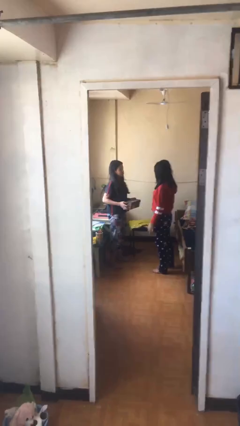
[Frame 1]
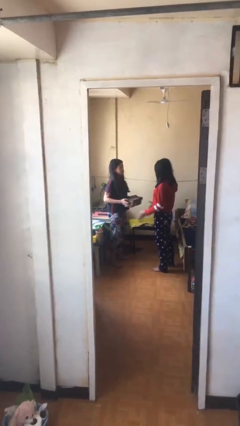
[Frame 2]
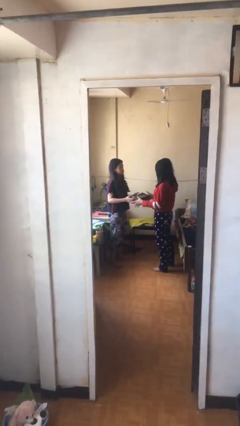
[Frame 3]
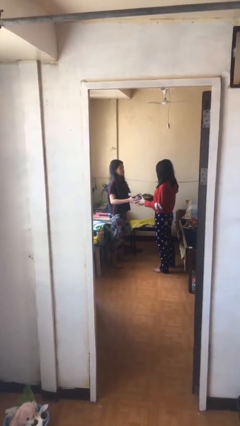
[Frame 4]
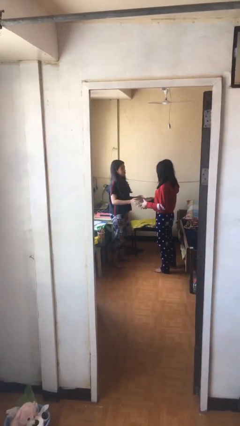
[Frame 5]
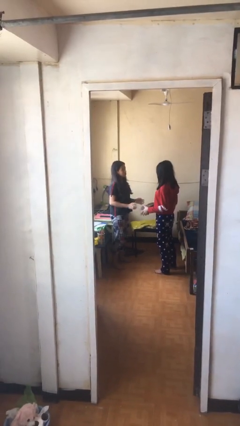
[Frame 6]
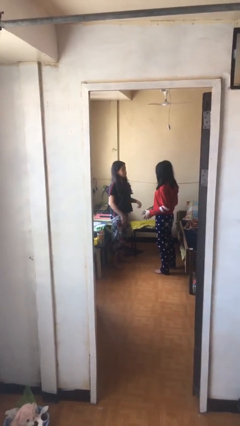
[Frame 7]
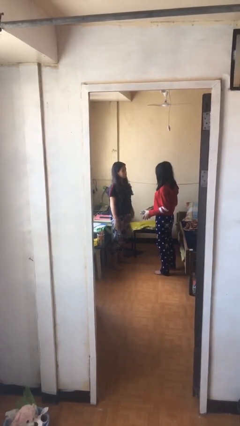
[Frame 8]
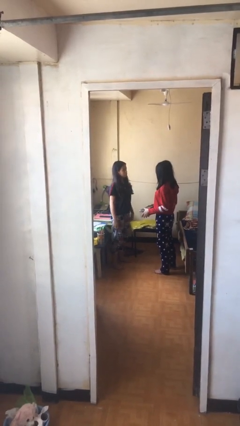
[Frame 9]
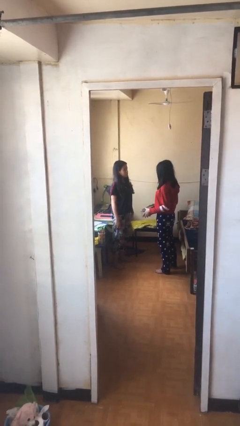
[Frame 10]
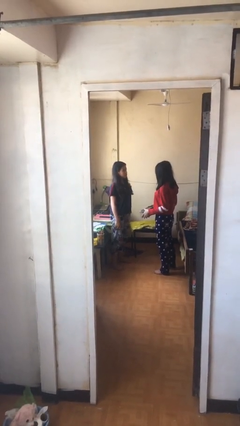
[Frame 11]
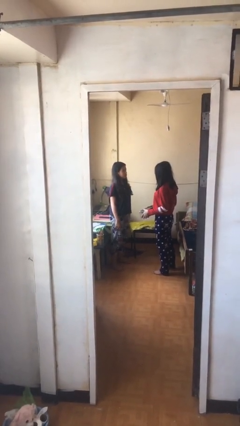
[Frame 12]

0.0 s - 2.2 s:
person transfers object to person

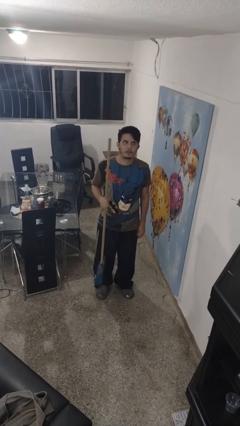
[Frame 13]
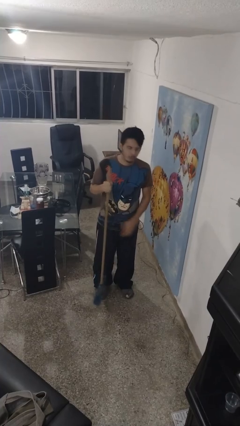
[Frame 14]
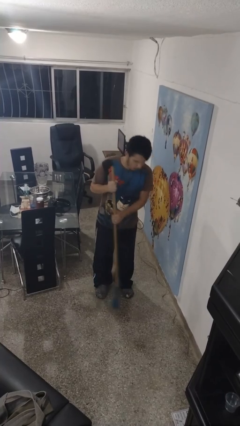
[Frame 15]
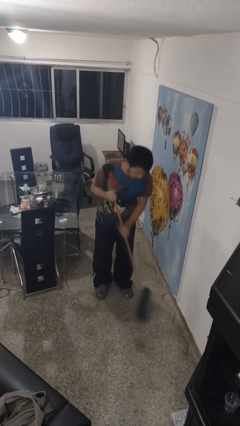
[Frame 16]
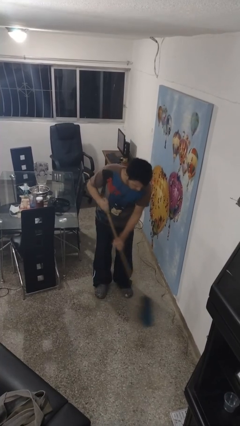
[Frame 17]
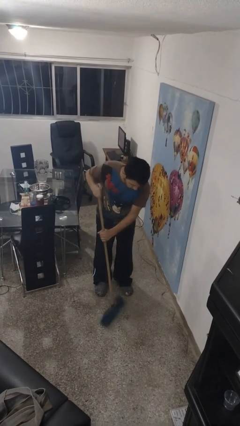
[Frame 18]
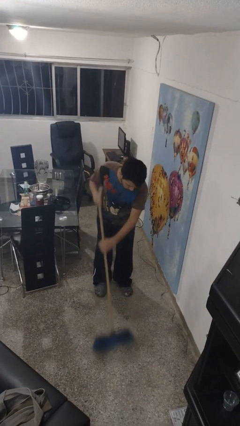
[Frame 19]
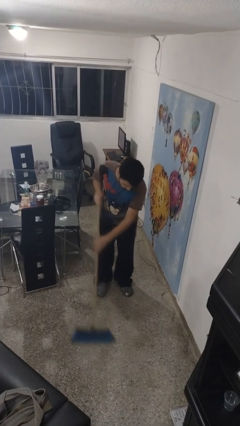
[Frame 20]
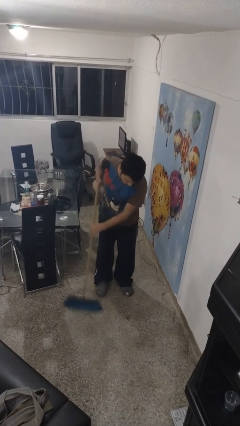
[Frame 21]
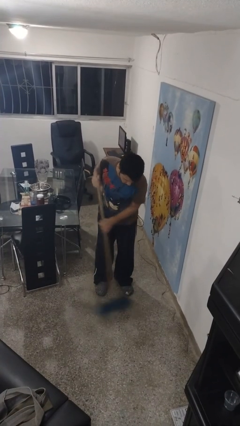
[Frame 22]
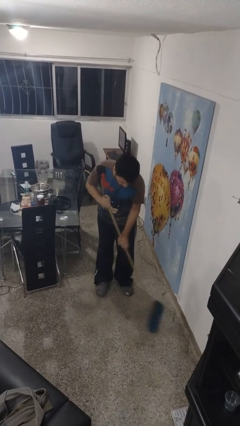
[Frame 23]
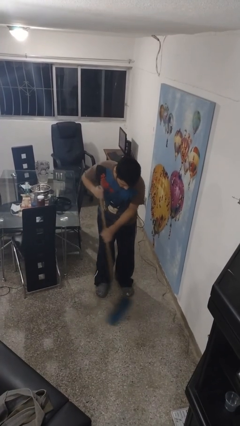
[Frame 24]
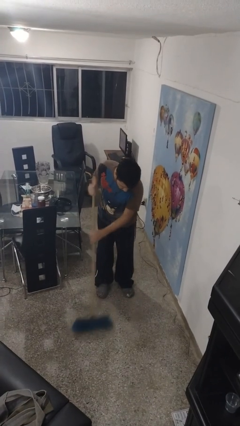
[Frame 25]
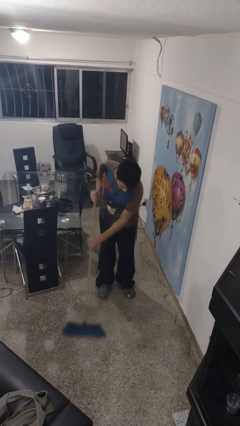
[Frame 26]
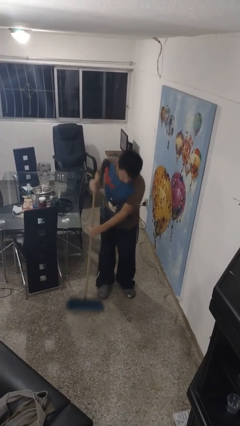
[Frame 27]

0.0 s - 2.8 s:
person sweeps floor

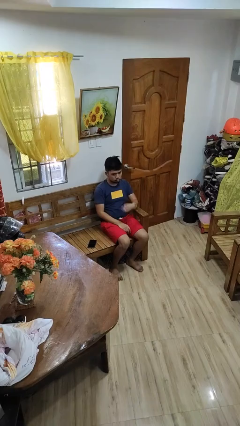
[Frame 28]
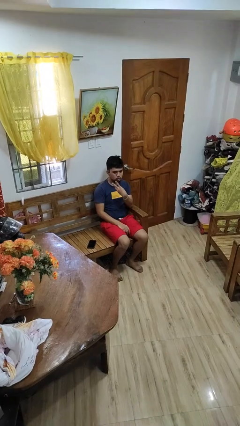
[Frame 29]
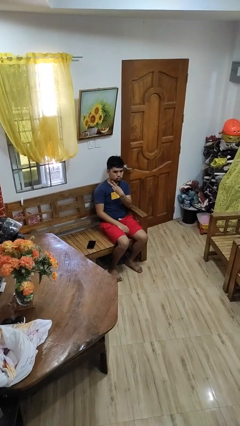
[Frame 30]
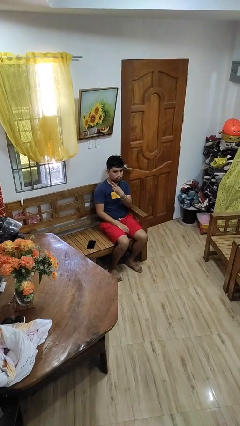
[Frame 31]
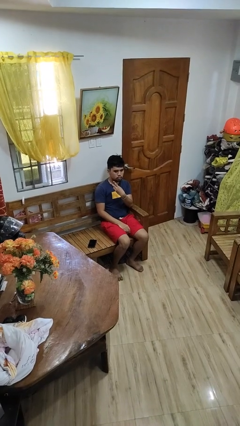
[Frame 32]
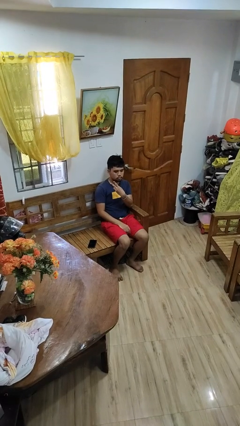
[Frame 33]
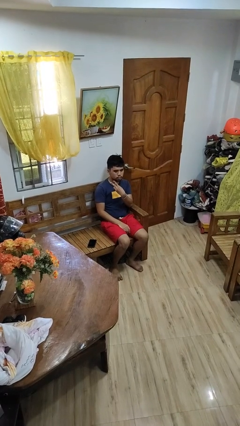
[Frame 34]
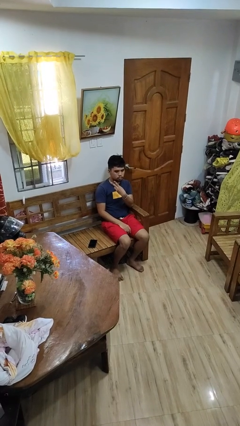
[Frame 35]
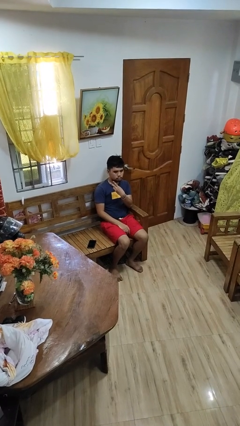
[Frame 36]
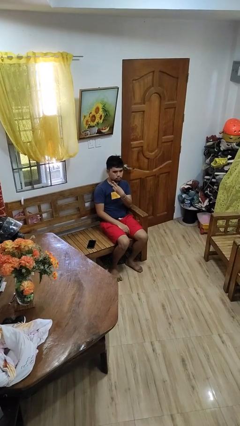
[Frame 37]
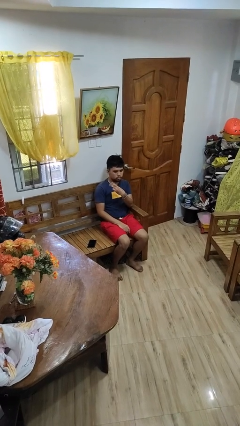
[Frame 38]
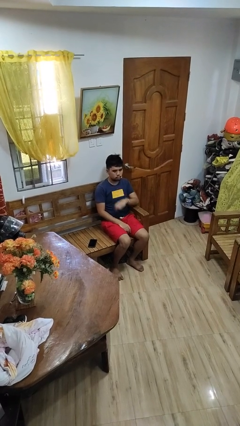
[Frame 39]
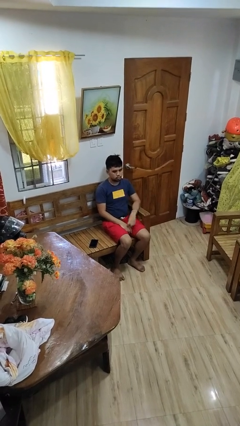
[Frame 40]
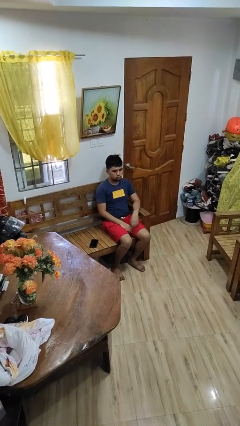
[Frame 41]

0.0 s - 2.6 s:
person gestures peace

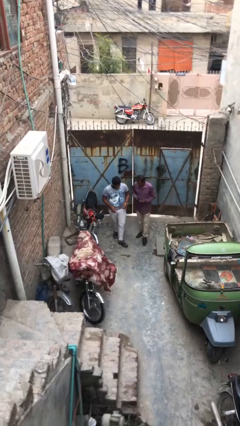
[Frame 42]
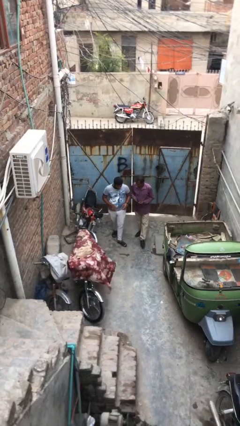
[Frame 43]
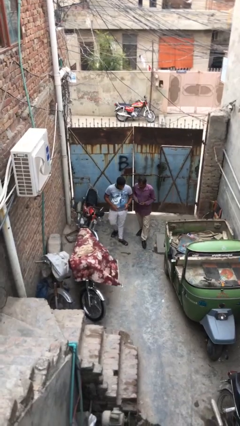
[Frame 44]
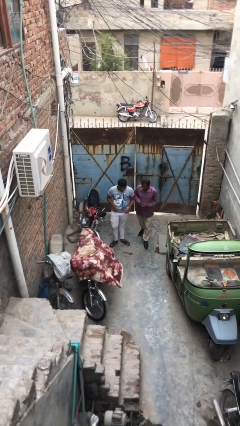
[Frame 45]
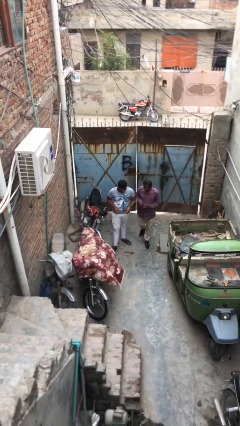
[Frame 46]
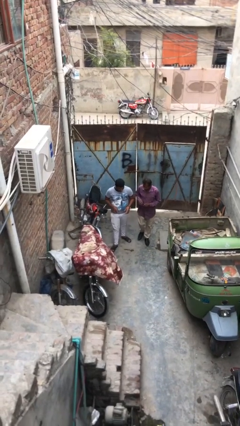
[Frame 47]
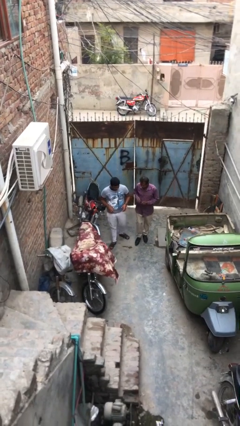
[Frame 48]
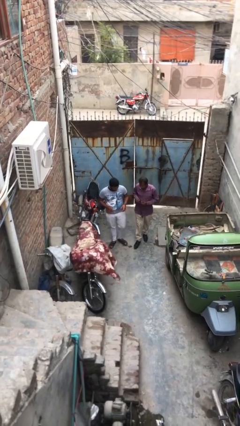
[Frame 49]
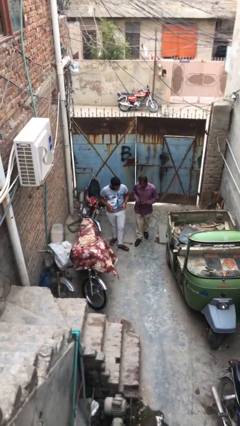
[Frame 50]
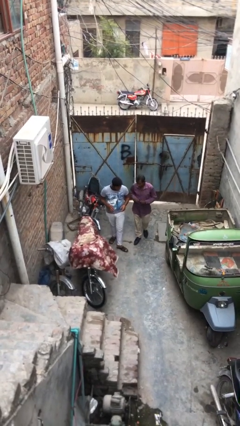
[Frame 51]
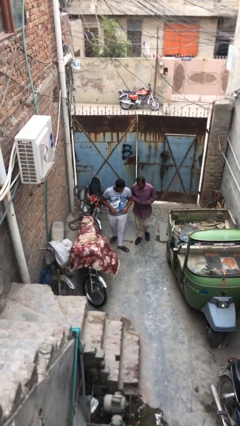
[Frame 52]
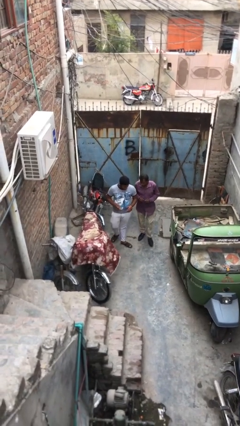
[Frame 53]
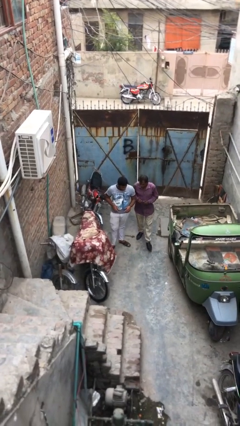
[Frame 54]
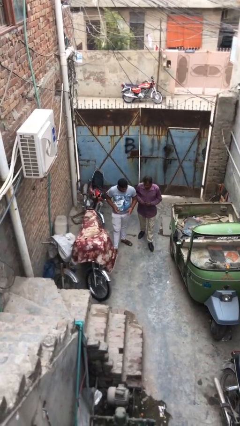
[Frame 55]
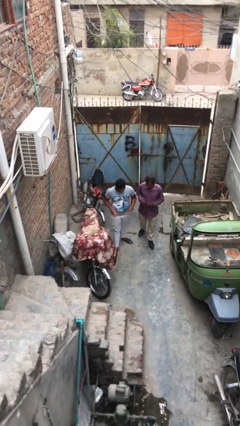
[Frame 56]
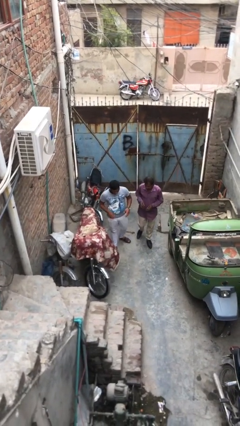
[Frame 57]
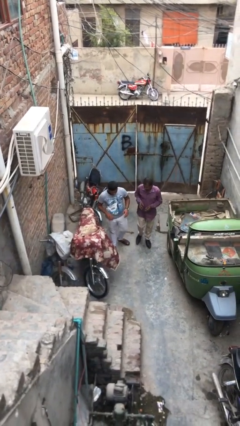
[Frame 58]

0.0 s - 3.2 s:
person talks to person

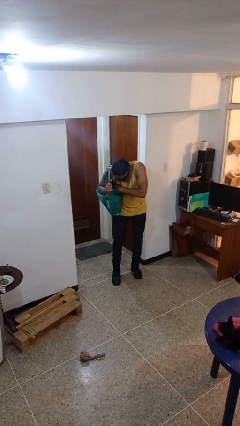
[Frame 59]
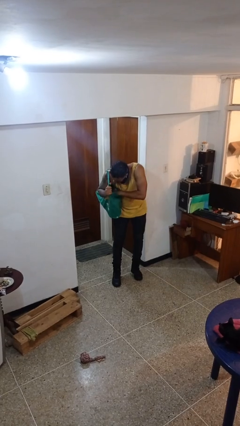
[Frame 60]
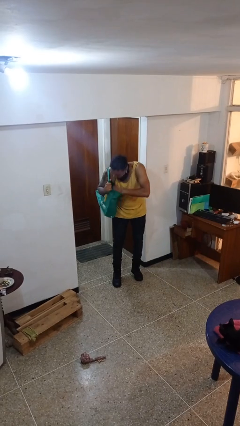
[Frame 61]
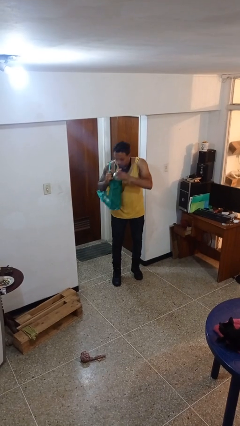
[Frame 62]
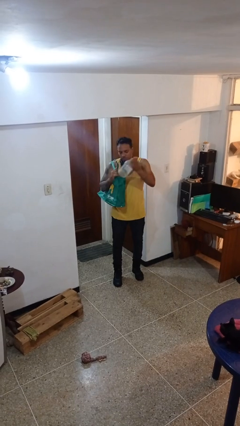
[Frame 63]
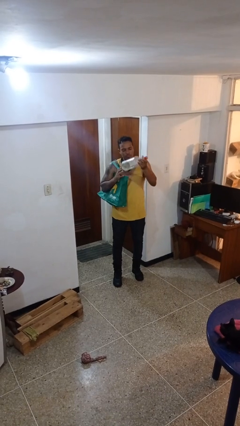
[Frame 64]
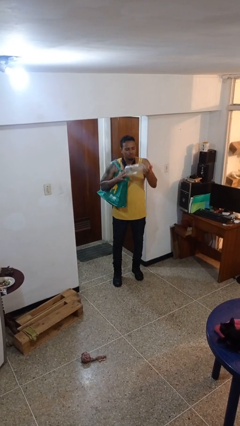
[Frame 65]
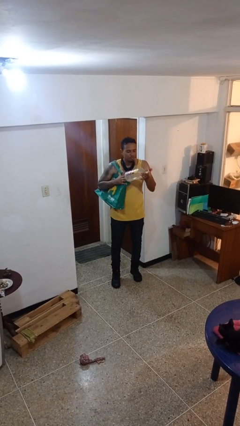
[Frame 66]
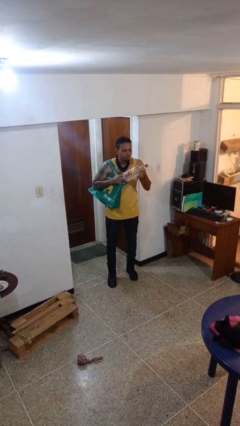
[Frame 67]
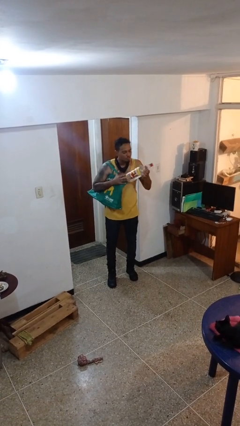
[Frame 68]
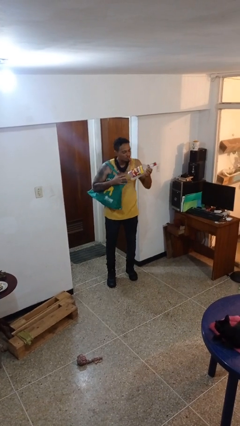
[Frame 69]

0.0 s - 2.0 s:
person takes object from purse

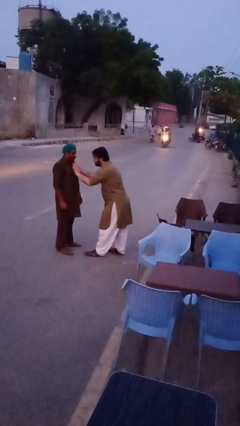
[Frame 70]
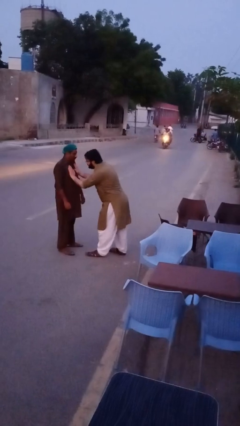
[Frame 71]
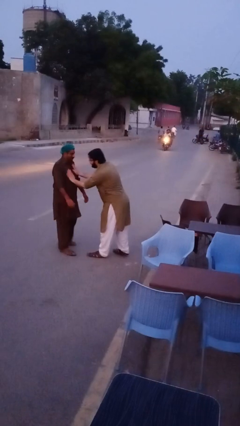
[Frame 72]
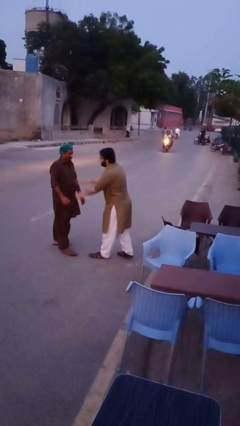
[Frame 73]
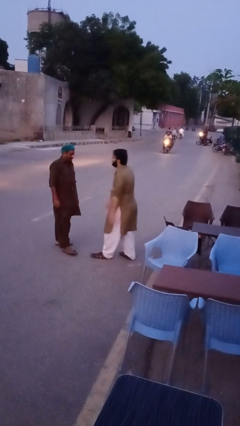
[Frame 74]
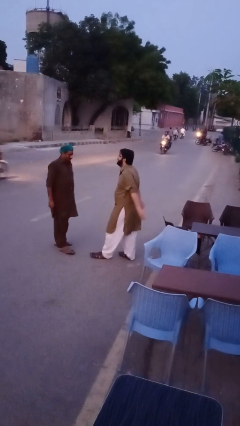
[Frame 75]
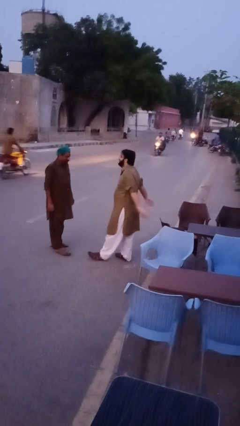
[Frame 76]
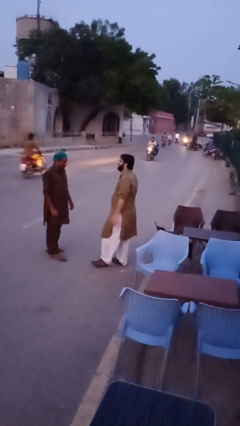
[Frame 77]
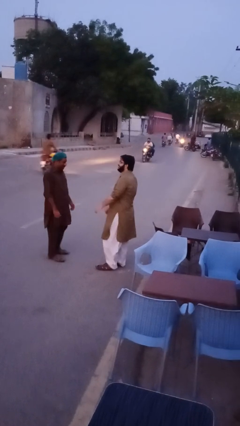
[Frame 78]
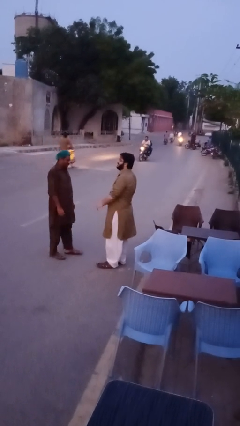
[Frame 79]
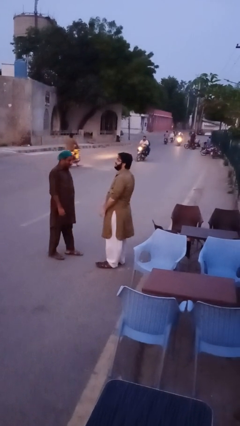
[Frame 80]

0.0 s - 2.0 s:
person shoves person

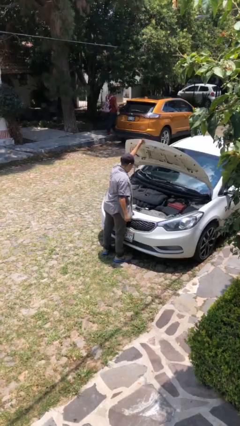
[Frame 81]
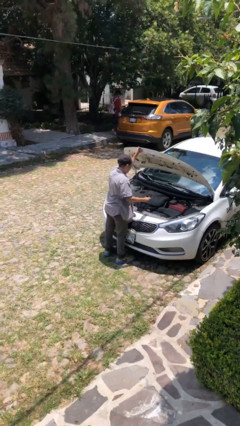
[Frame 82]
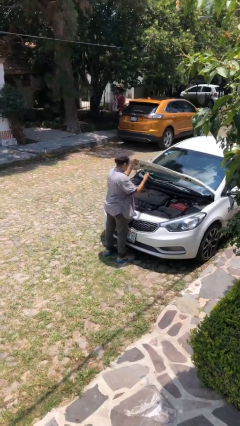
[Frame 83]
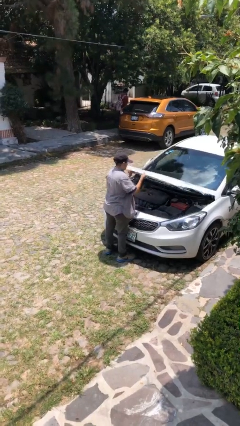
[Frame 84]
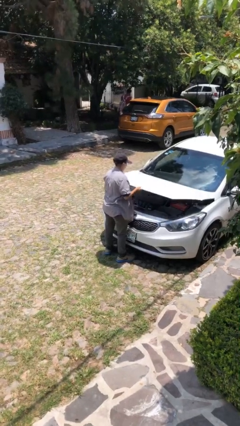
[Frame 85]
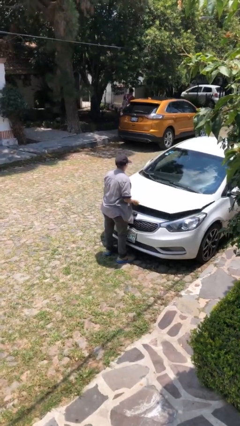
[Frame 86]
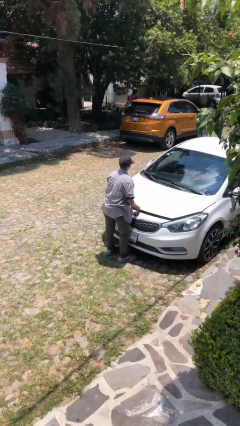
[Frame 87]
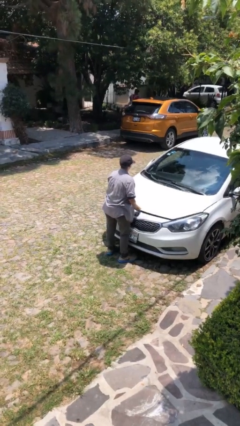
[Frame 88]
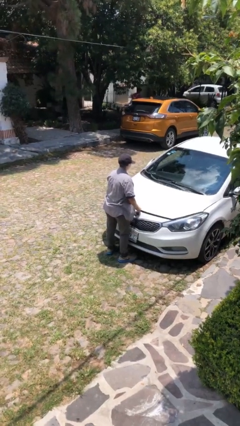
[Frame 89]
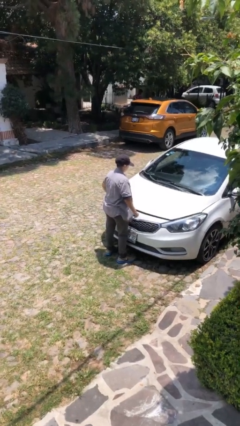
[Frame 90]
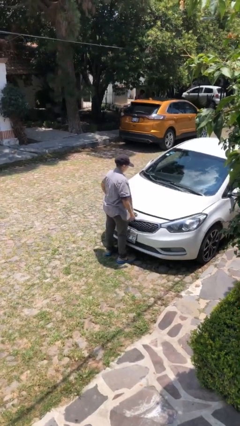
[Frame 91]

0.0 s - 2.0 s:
person closes car hood

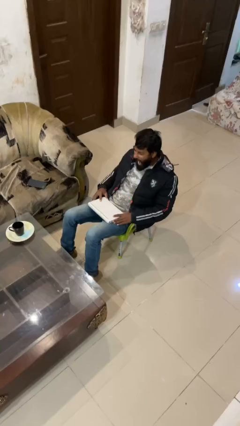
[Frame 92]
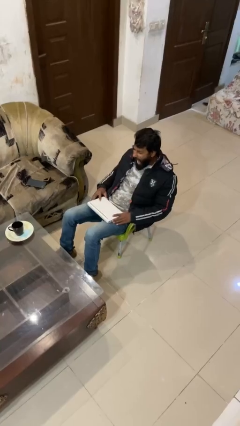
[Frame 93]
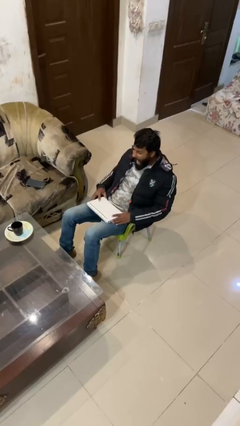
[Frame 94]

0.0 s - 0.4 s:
person interacts with laptop
